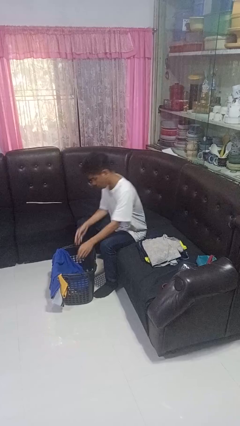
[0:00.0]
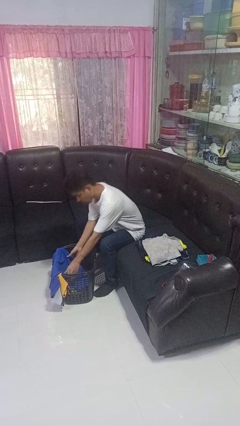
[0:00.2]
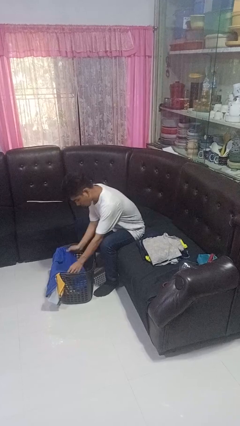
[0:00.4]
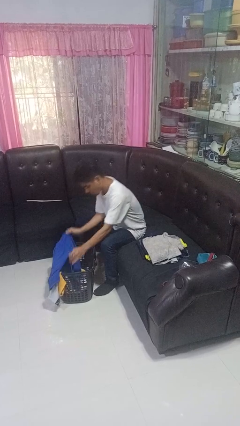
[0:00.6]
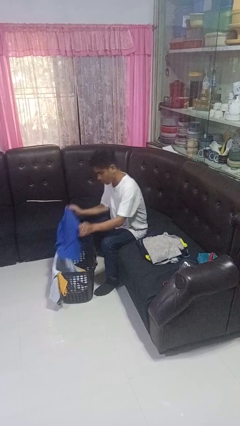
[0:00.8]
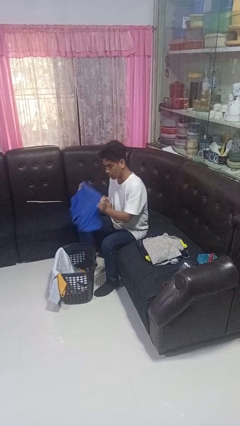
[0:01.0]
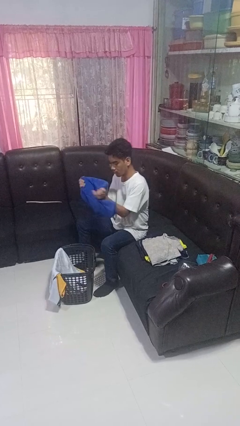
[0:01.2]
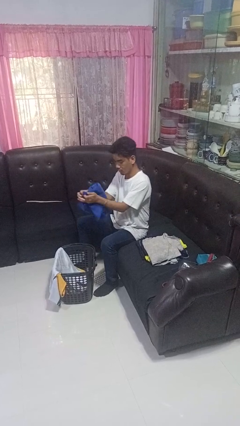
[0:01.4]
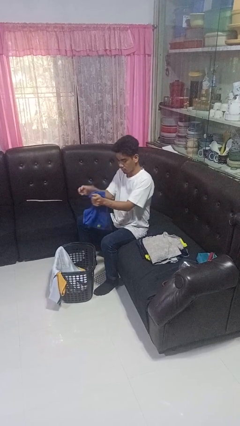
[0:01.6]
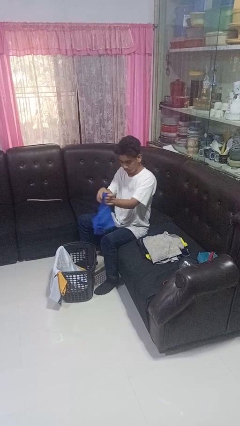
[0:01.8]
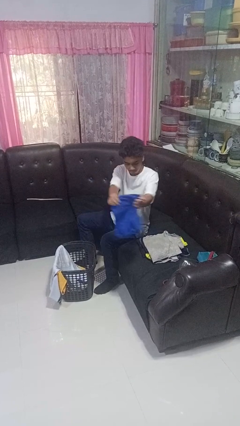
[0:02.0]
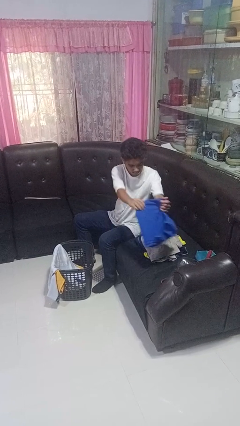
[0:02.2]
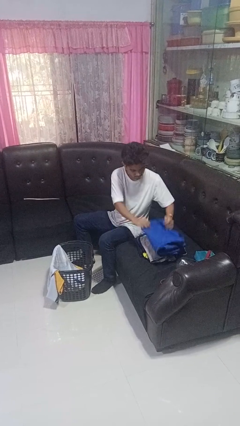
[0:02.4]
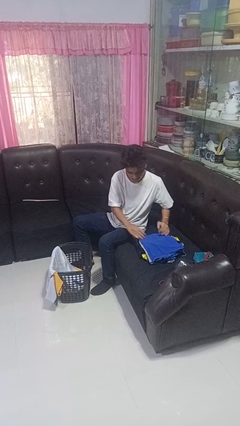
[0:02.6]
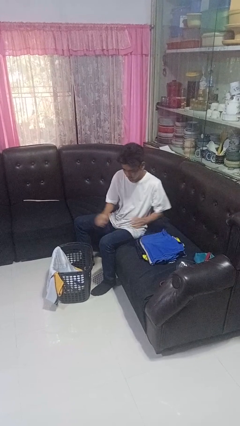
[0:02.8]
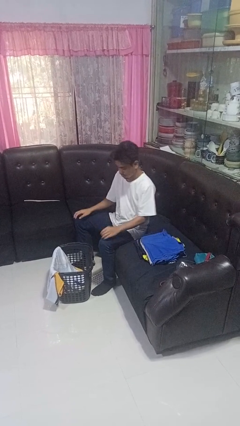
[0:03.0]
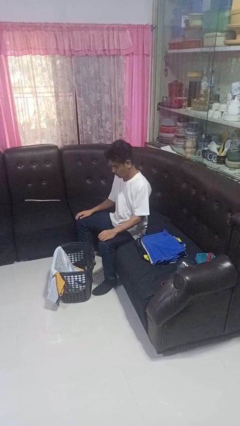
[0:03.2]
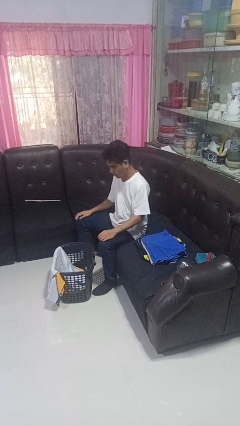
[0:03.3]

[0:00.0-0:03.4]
person folds shirt

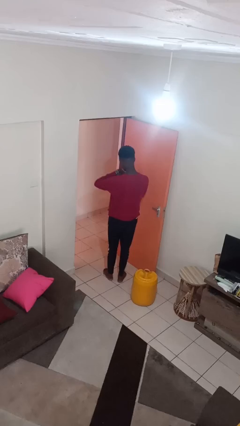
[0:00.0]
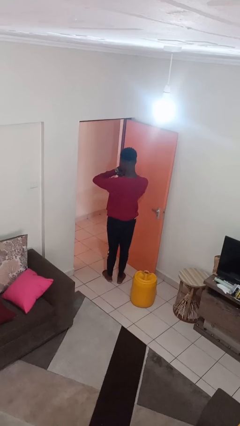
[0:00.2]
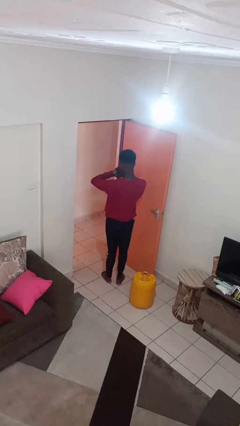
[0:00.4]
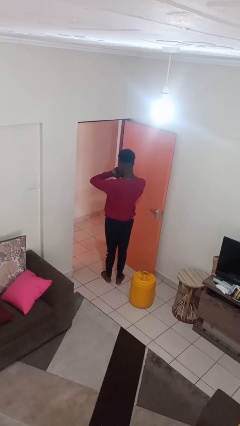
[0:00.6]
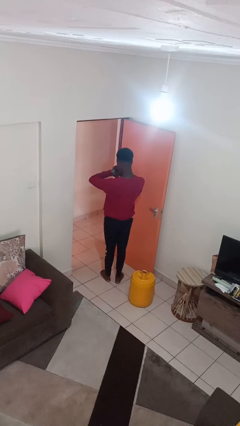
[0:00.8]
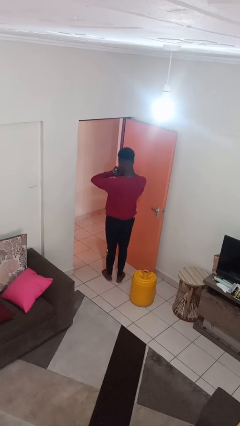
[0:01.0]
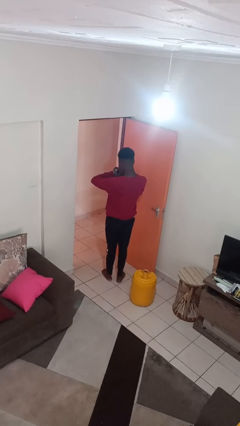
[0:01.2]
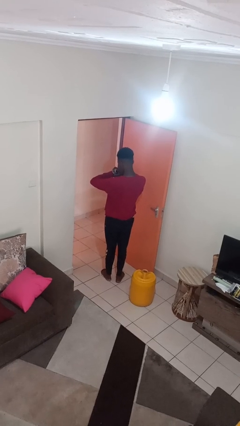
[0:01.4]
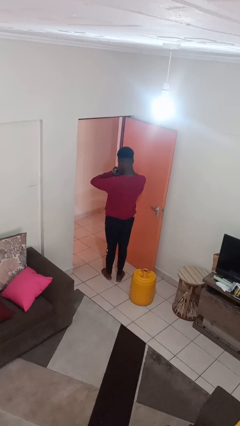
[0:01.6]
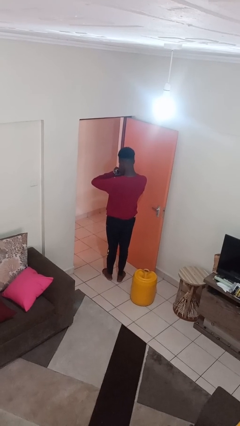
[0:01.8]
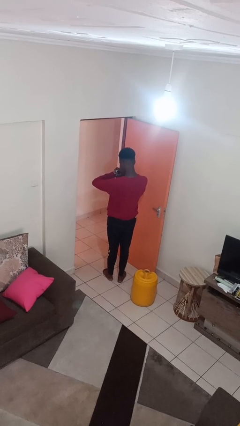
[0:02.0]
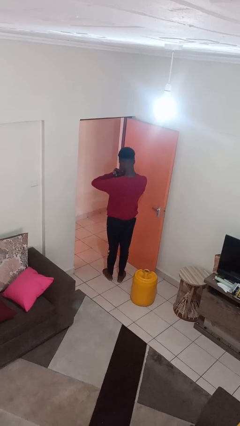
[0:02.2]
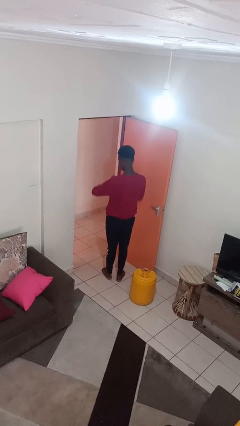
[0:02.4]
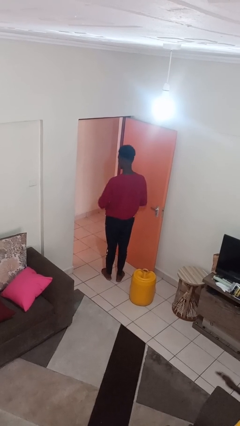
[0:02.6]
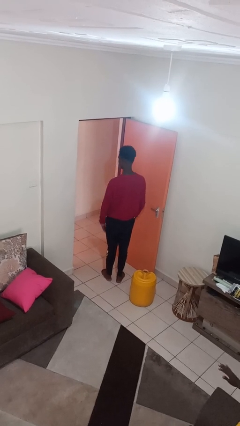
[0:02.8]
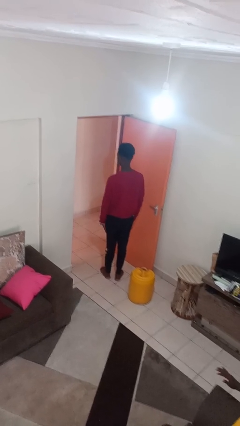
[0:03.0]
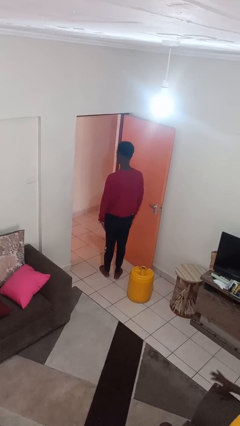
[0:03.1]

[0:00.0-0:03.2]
person looks at wristwatch

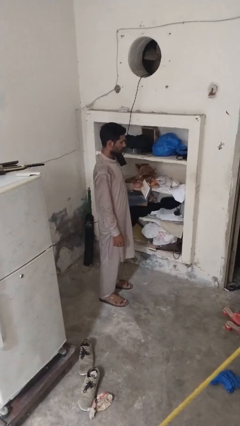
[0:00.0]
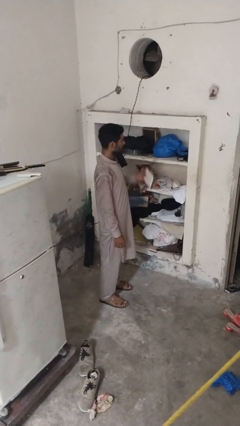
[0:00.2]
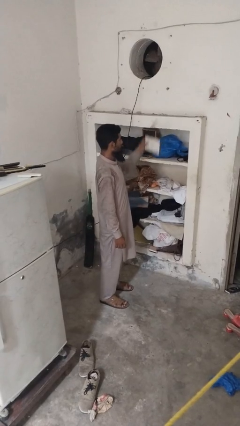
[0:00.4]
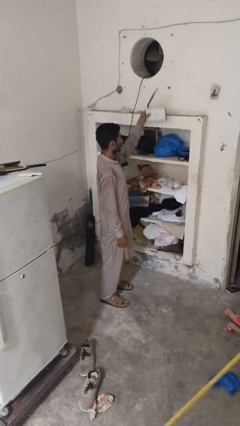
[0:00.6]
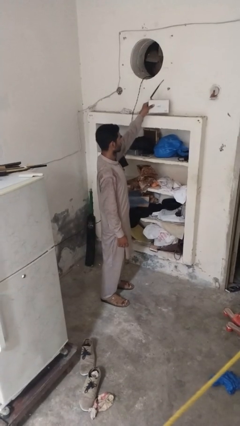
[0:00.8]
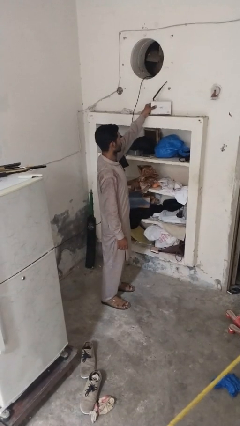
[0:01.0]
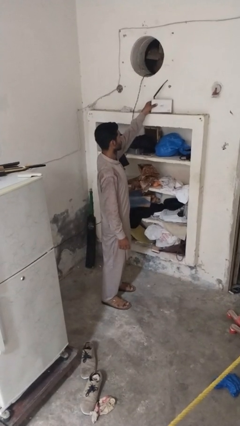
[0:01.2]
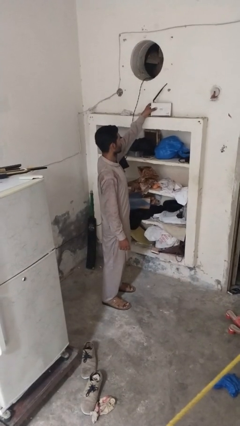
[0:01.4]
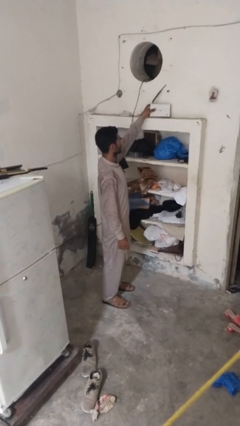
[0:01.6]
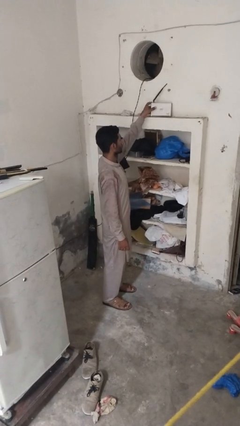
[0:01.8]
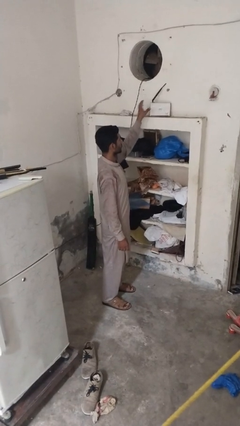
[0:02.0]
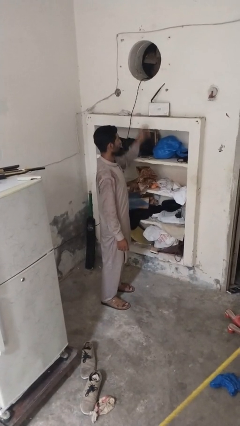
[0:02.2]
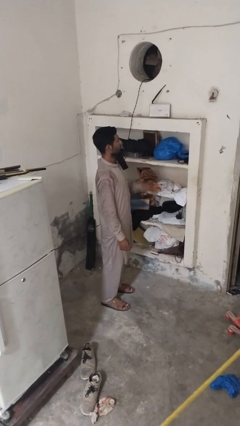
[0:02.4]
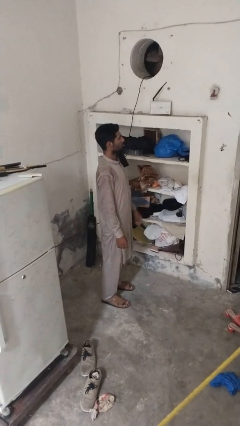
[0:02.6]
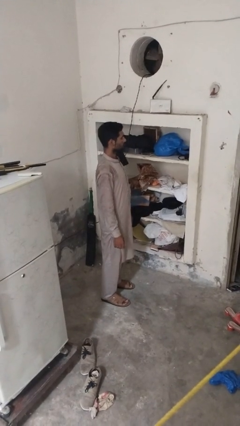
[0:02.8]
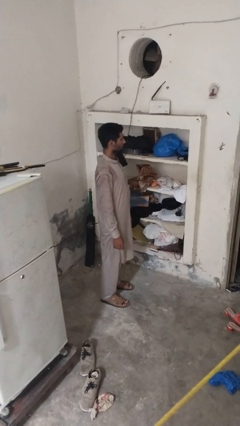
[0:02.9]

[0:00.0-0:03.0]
person puts down object on shelf

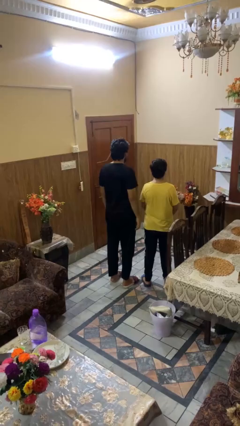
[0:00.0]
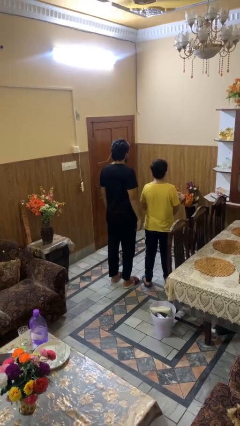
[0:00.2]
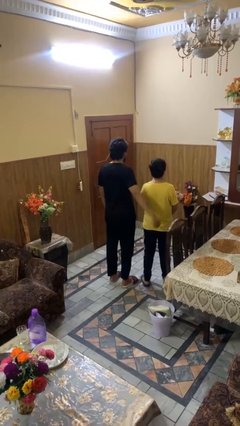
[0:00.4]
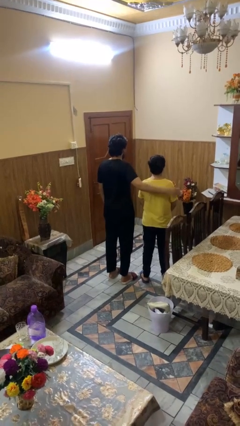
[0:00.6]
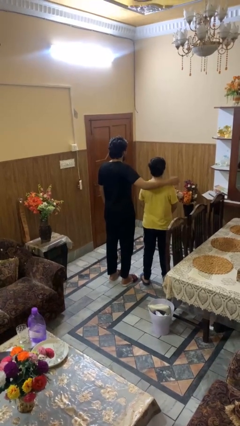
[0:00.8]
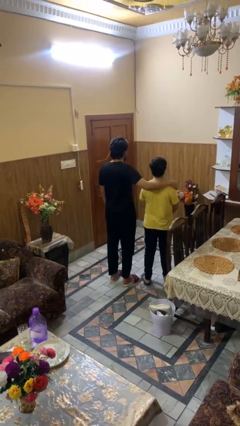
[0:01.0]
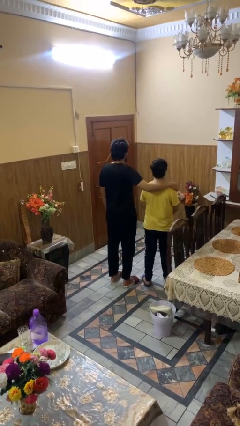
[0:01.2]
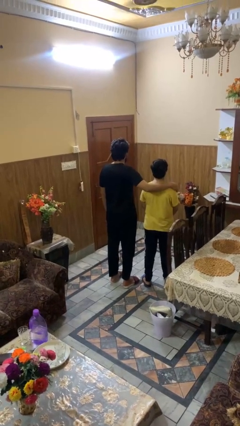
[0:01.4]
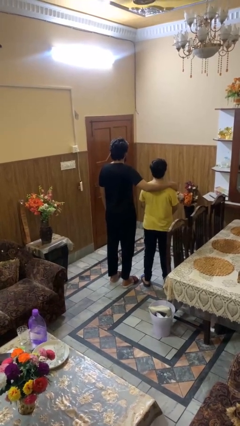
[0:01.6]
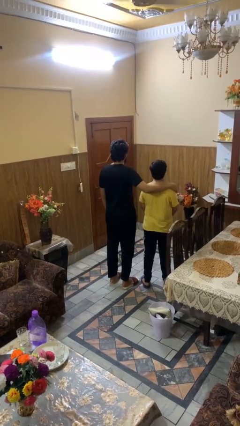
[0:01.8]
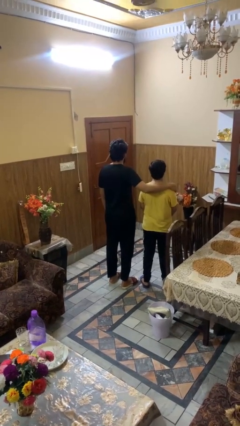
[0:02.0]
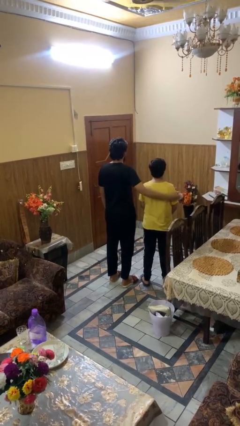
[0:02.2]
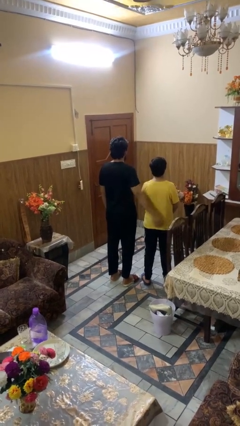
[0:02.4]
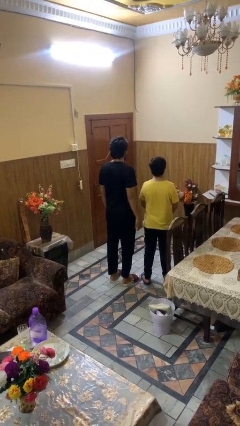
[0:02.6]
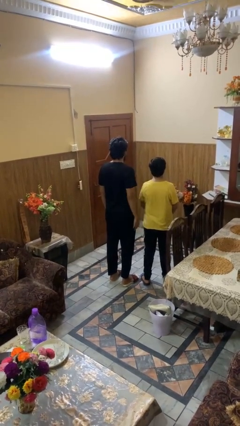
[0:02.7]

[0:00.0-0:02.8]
person pounds shoulders of person

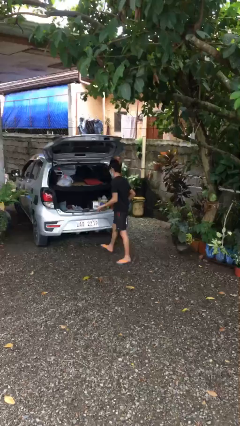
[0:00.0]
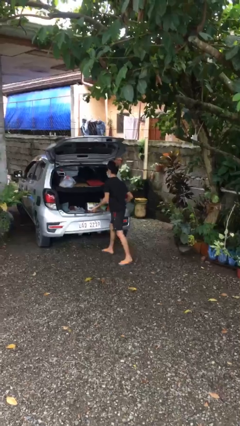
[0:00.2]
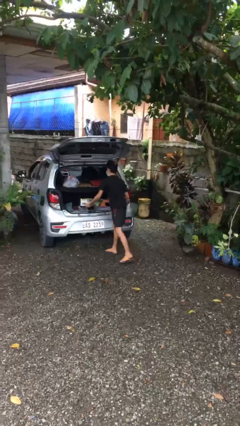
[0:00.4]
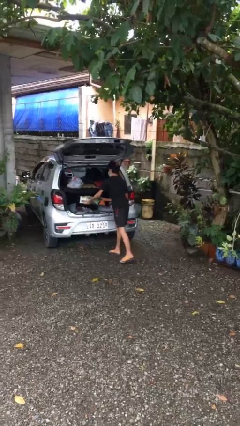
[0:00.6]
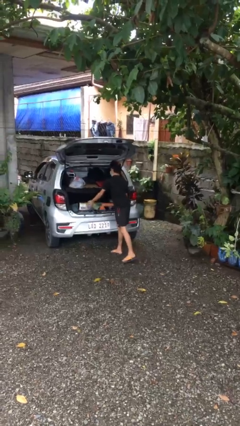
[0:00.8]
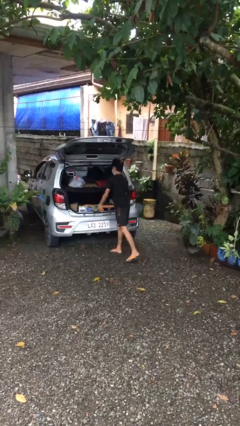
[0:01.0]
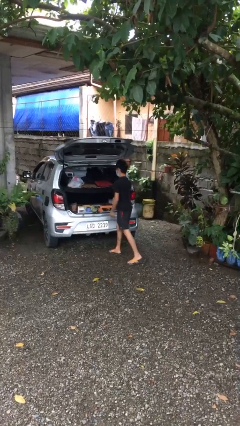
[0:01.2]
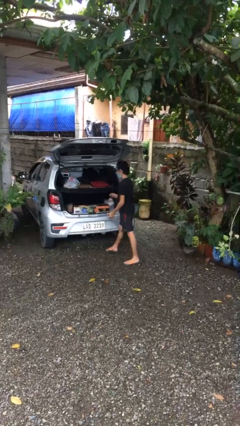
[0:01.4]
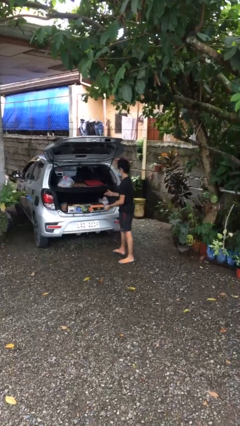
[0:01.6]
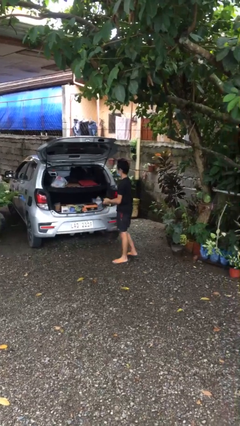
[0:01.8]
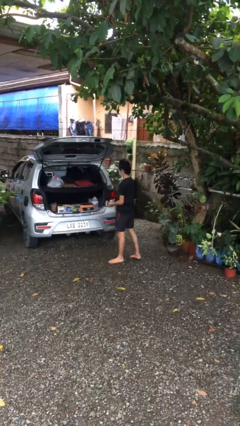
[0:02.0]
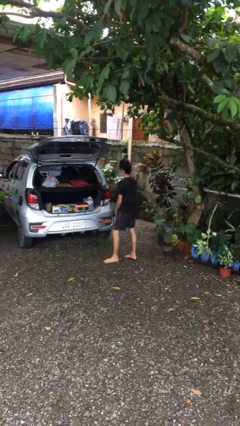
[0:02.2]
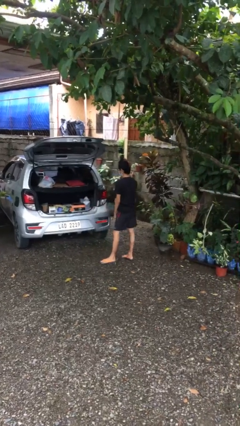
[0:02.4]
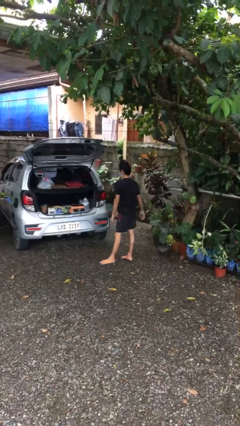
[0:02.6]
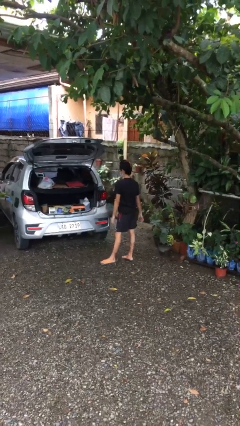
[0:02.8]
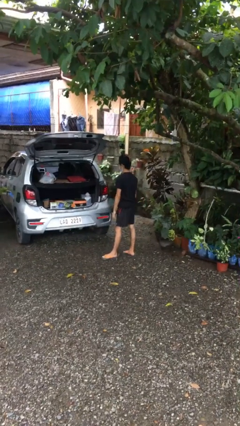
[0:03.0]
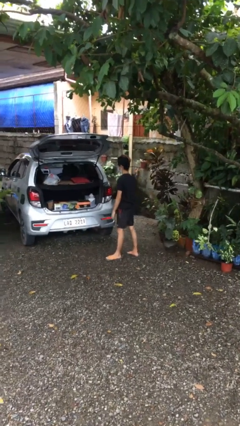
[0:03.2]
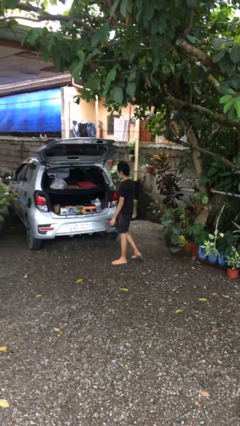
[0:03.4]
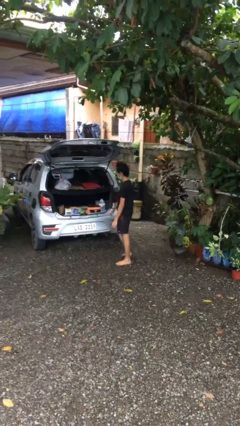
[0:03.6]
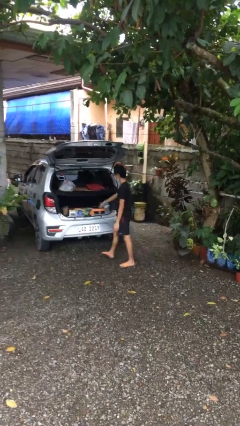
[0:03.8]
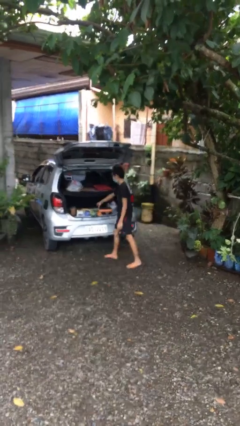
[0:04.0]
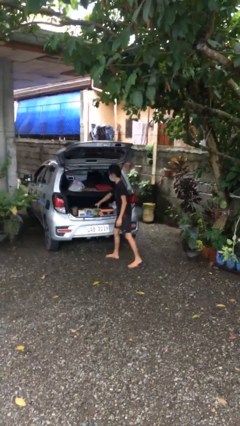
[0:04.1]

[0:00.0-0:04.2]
person loads car

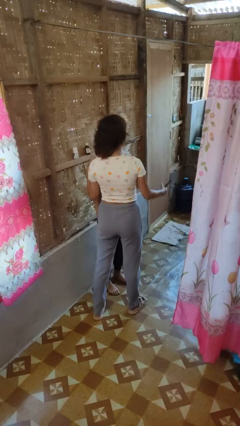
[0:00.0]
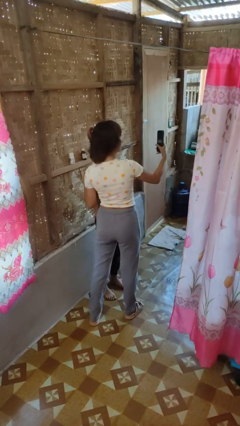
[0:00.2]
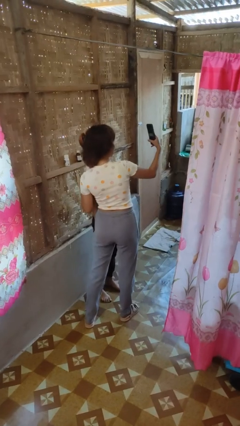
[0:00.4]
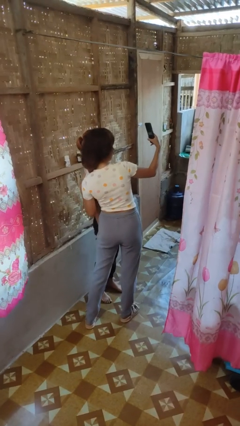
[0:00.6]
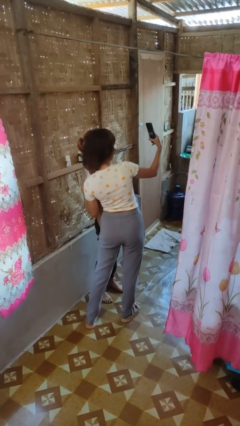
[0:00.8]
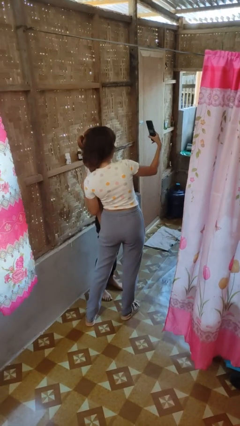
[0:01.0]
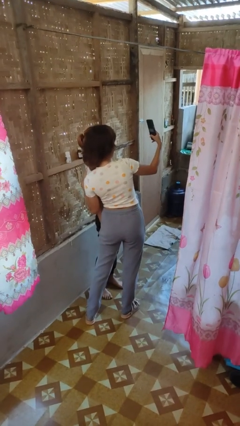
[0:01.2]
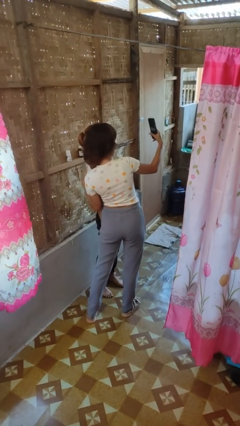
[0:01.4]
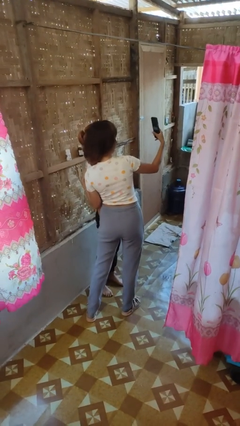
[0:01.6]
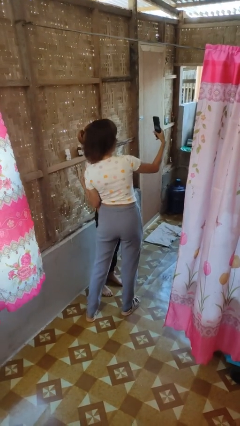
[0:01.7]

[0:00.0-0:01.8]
person takes selfie with person
